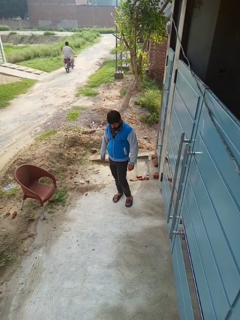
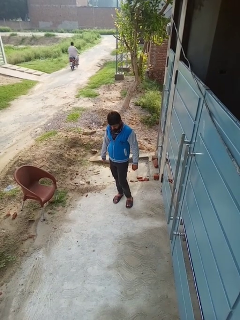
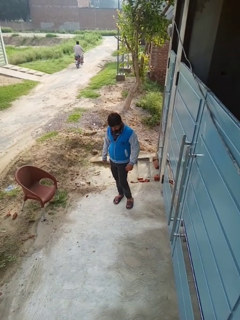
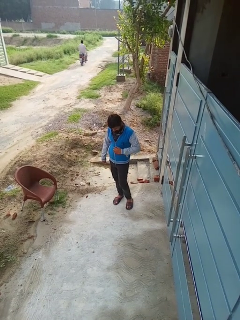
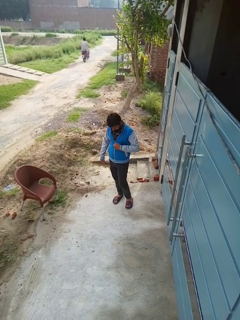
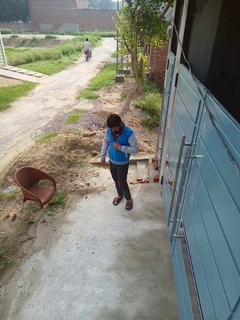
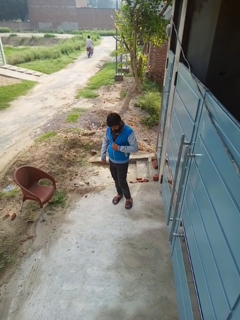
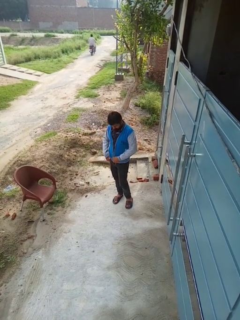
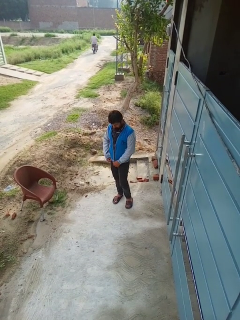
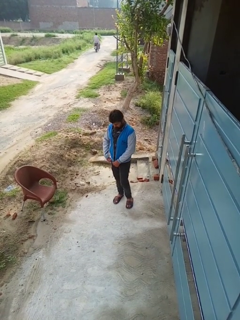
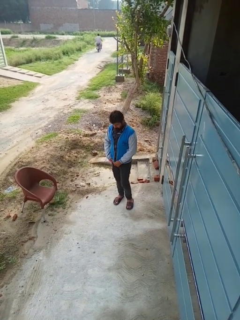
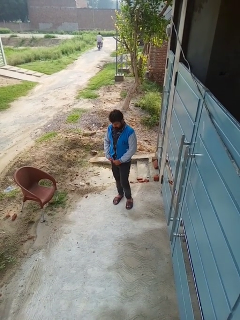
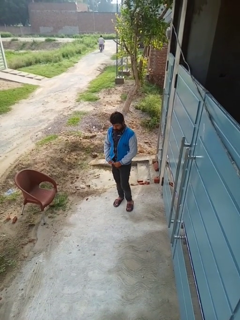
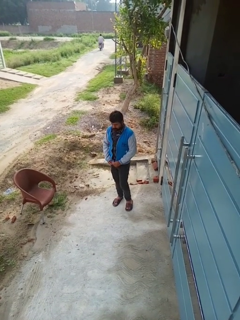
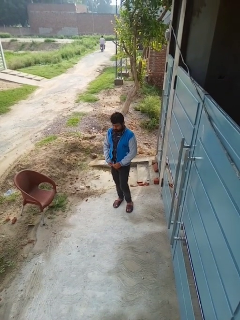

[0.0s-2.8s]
person unzips jacket

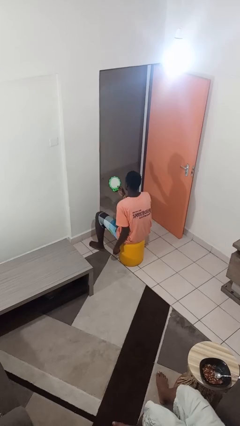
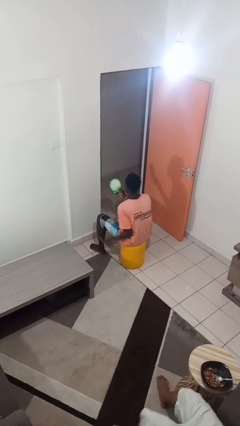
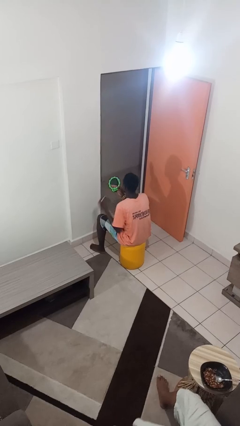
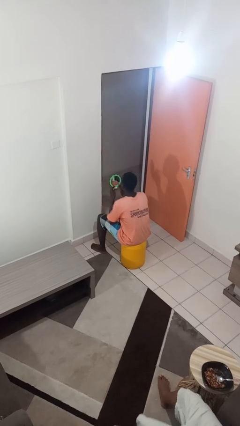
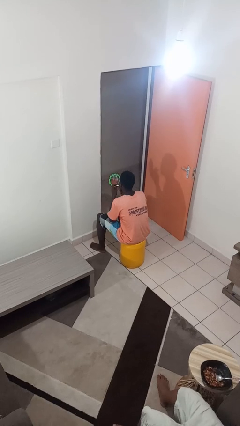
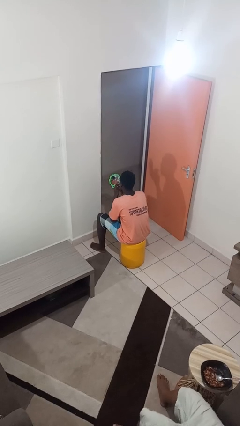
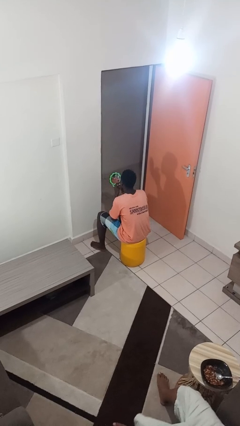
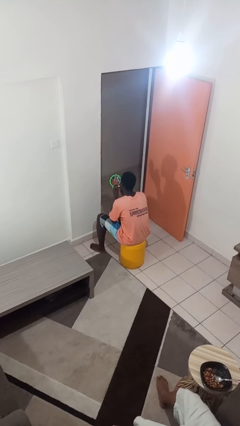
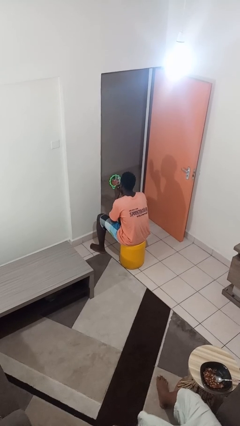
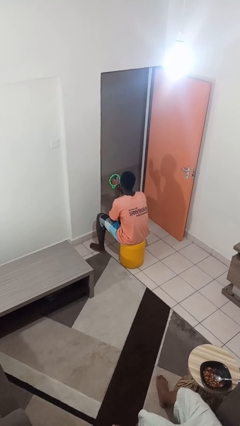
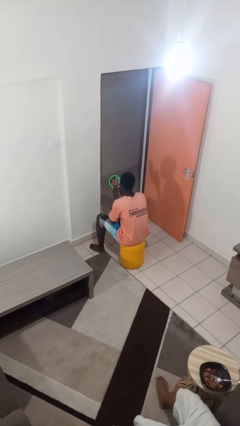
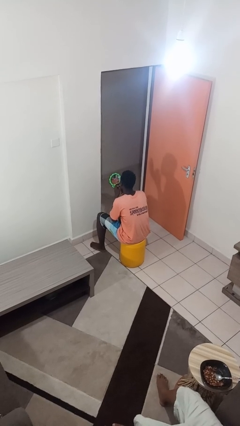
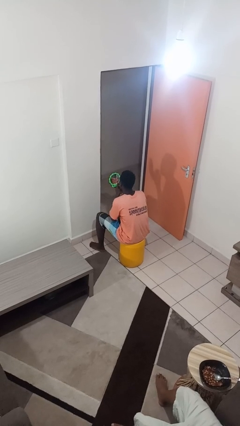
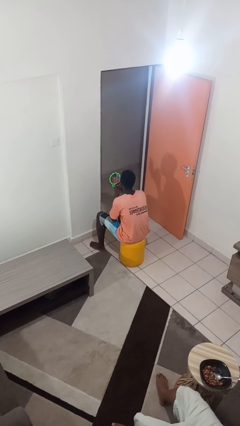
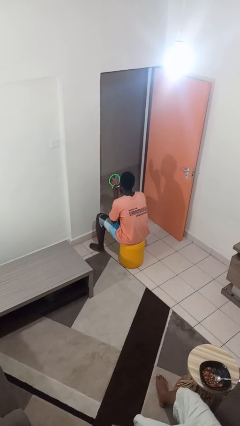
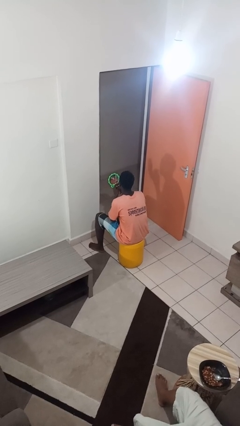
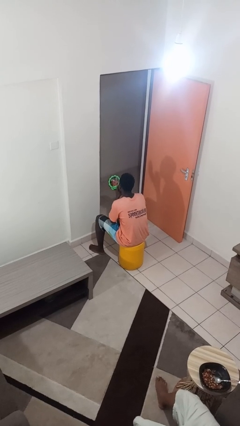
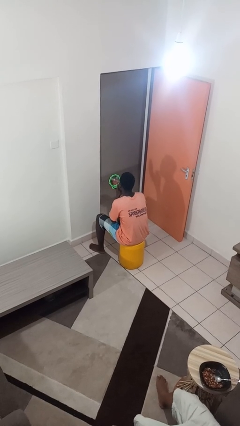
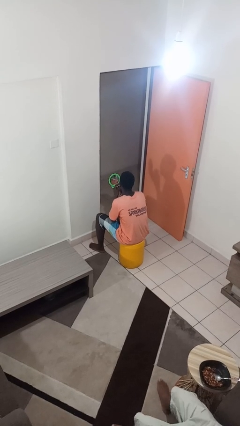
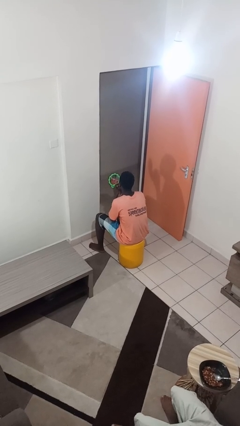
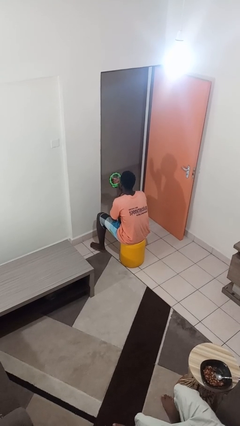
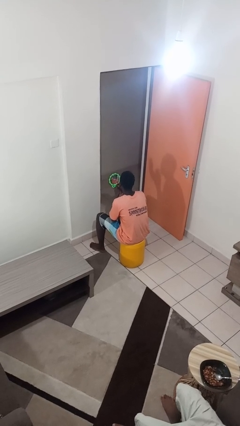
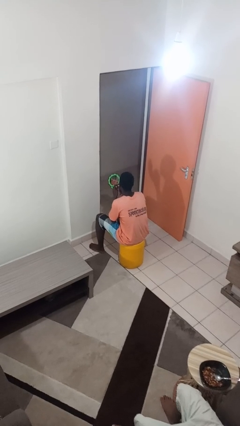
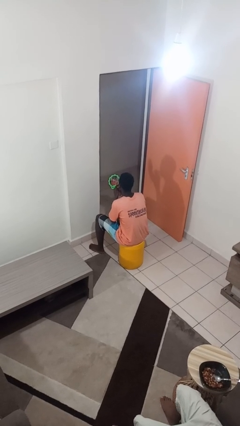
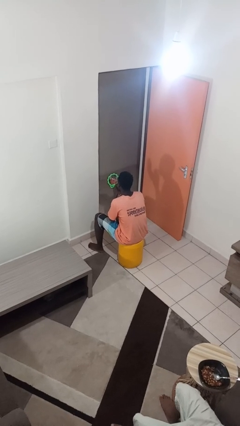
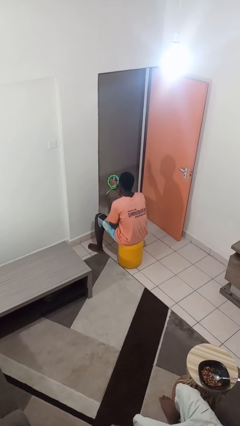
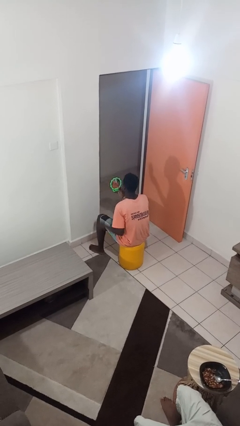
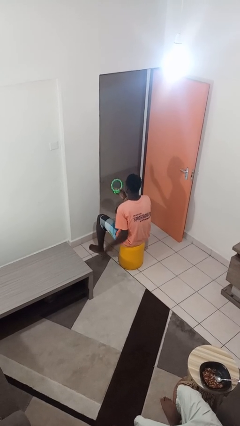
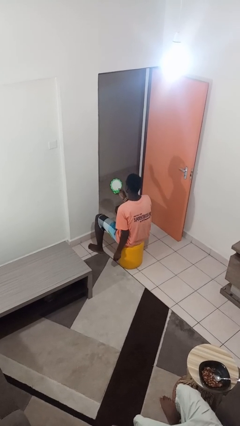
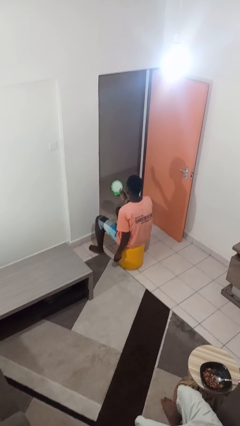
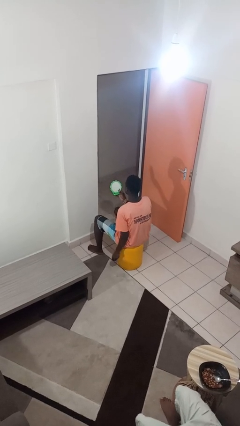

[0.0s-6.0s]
person applies lip makeup

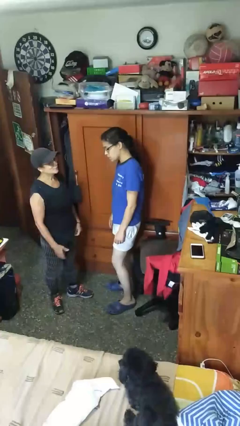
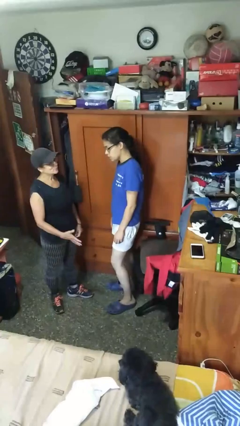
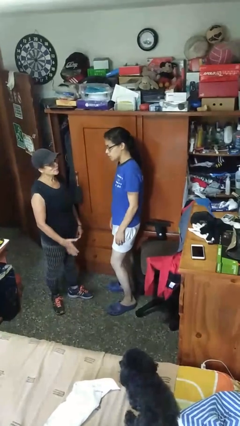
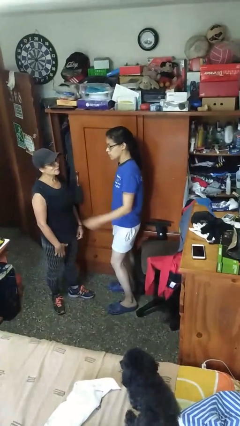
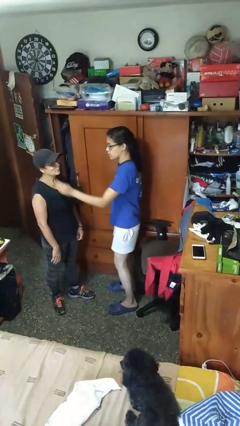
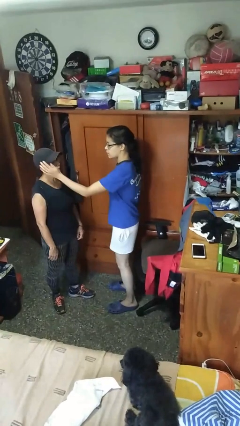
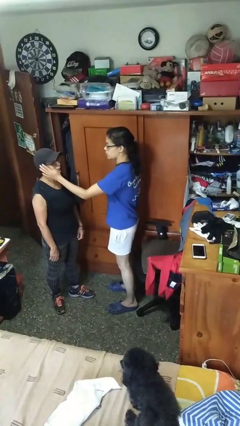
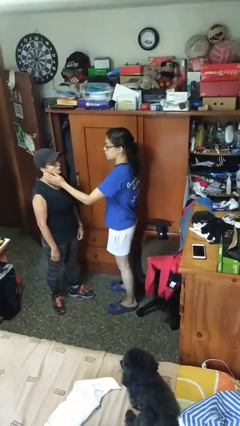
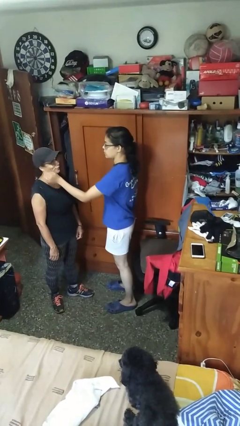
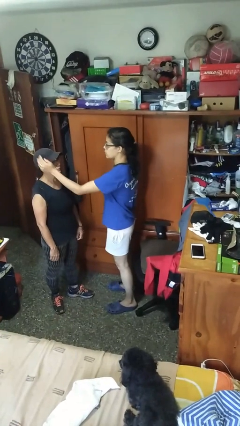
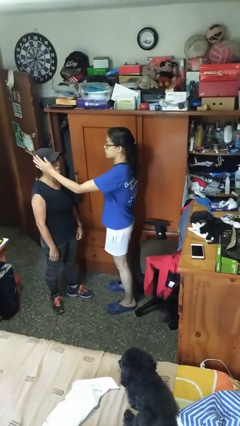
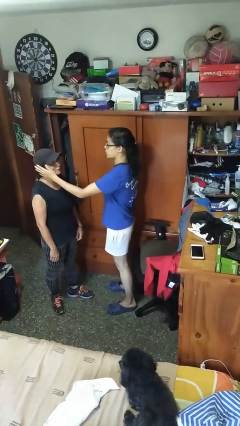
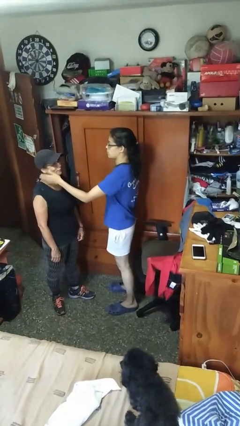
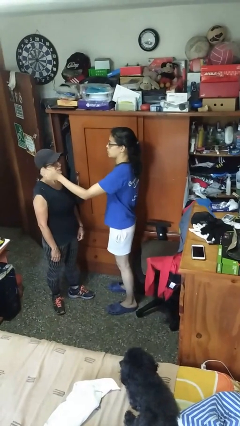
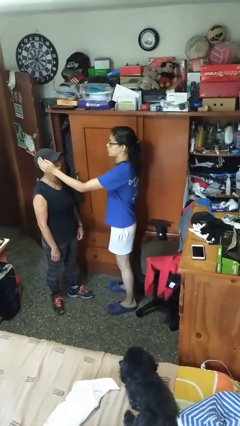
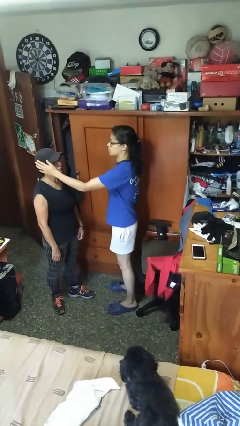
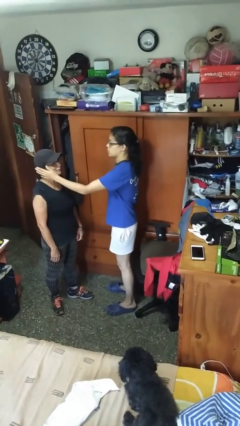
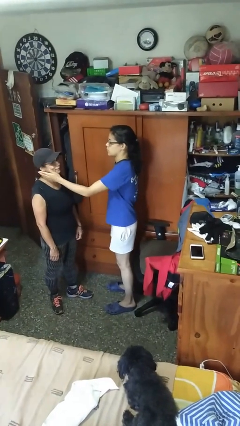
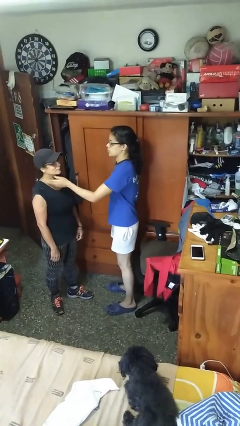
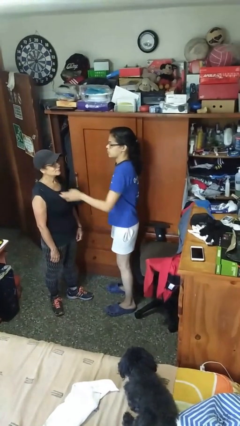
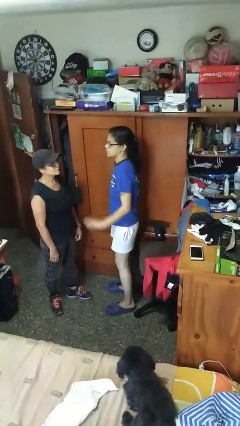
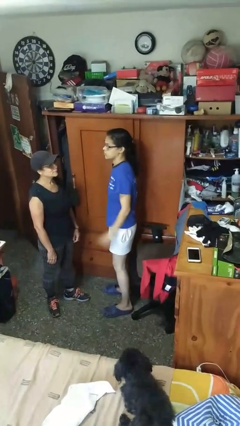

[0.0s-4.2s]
person touches face of person

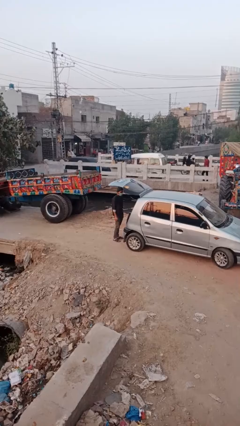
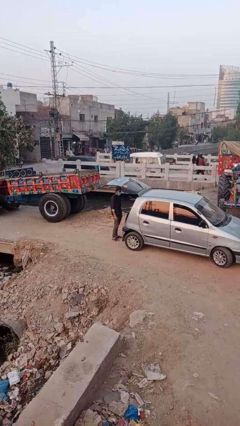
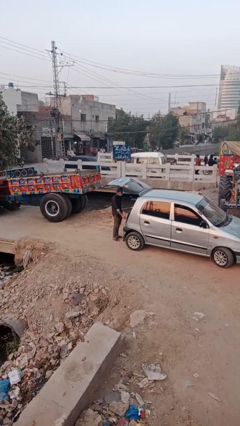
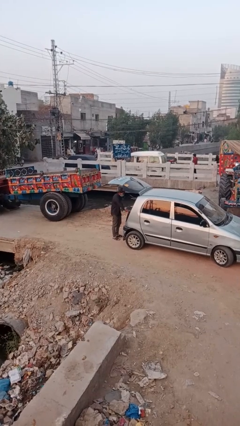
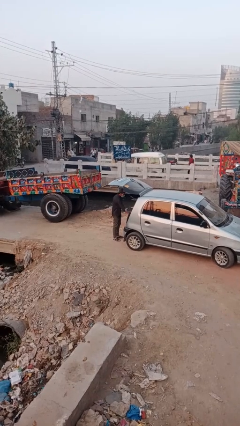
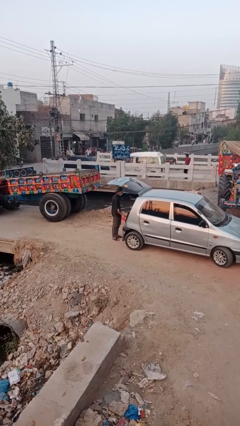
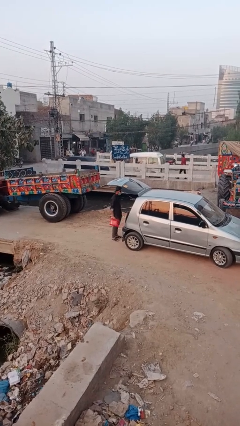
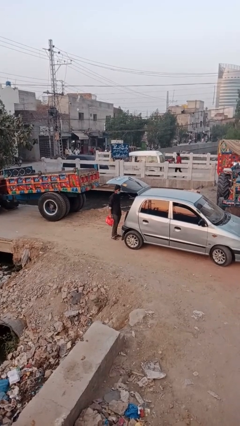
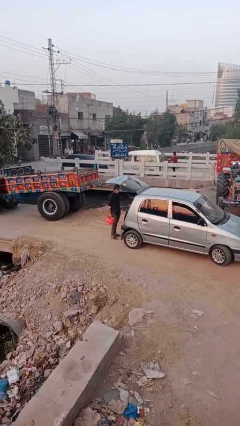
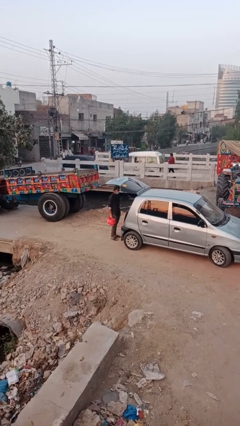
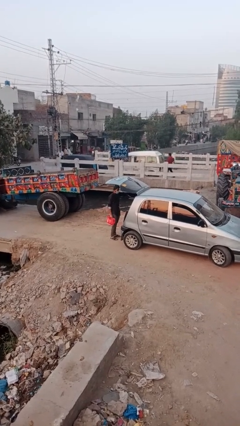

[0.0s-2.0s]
person unloads car

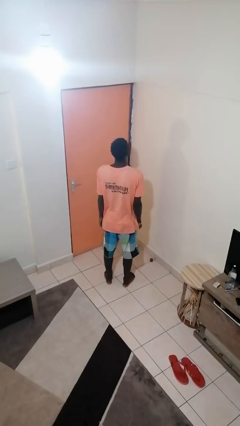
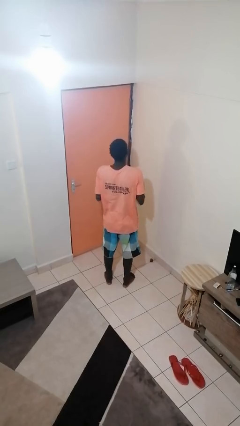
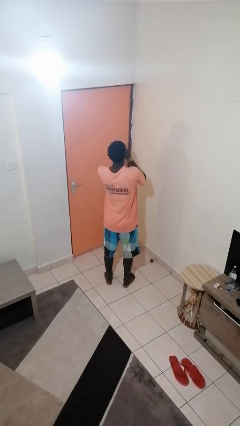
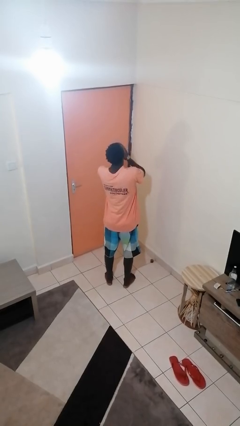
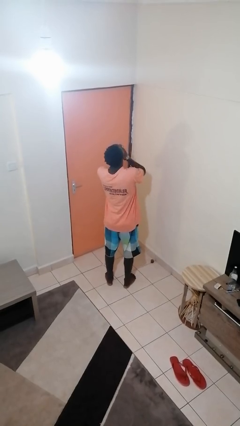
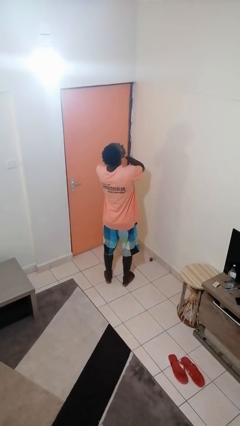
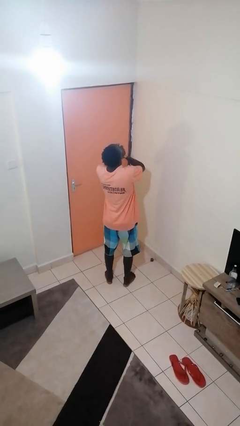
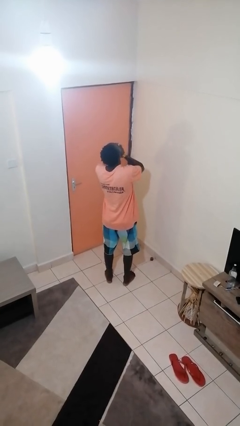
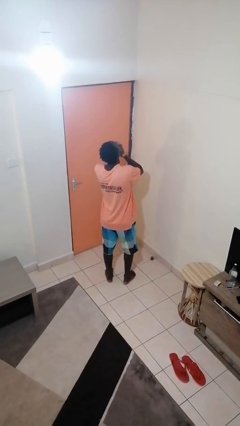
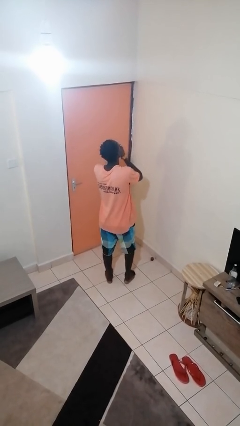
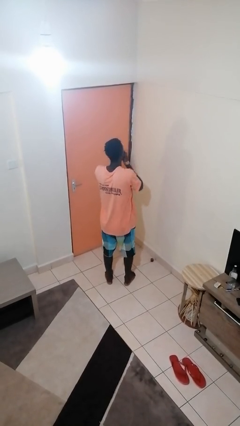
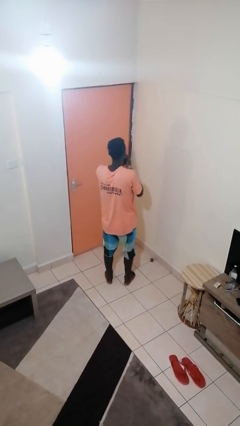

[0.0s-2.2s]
person yawns

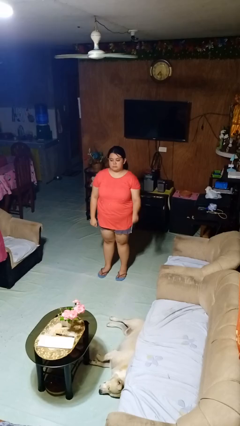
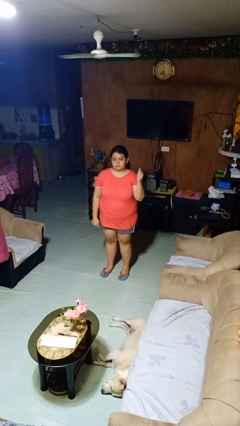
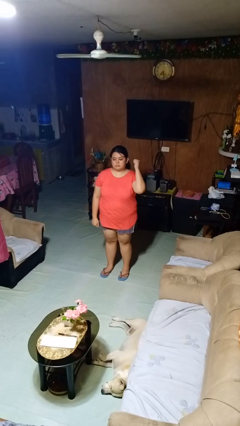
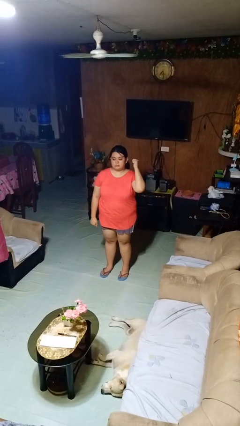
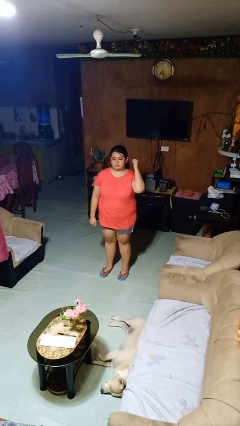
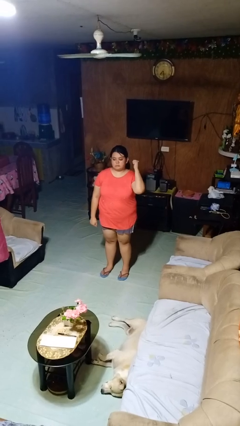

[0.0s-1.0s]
person gestures behind me

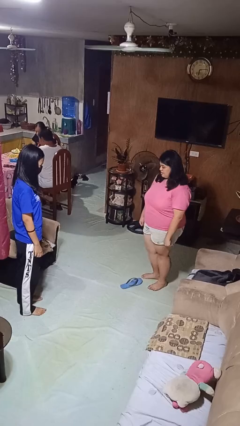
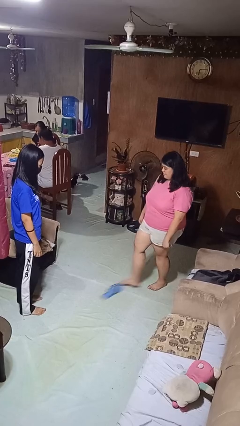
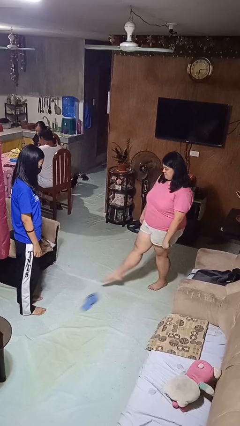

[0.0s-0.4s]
person kicks object to person
